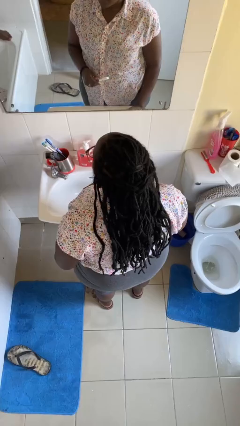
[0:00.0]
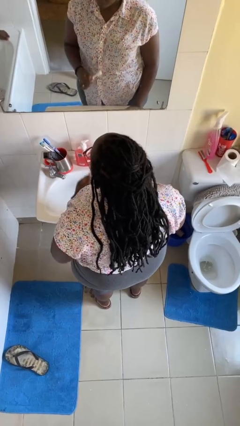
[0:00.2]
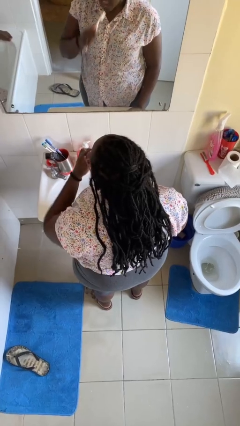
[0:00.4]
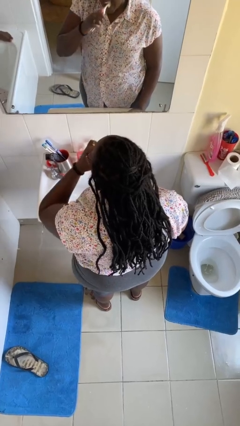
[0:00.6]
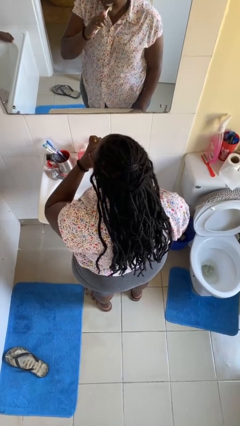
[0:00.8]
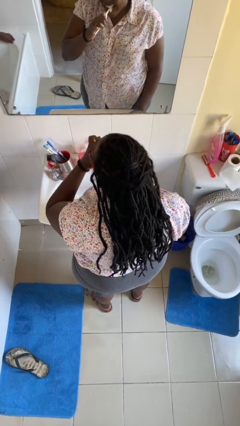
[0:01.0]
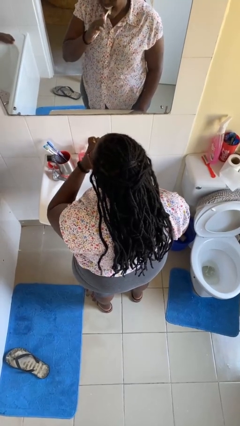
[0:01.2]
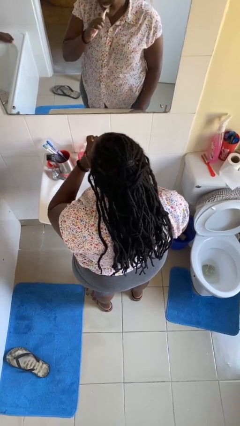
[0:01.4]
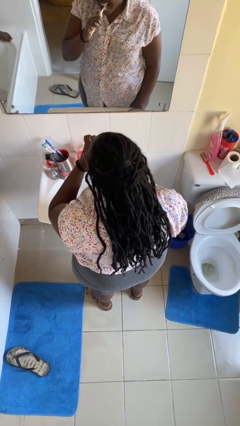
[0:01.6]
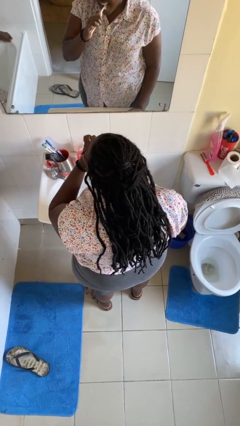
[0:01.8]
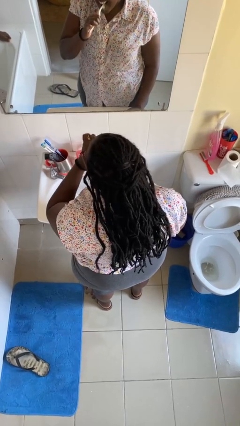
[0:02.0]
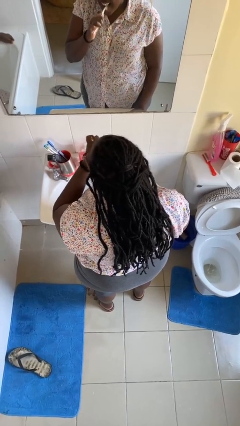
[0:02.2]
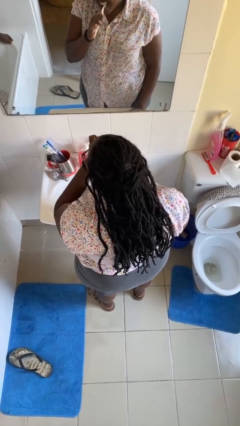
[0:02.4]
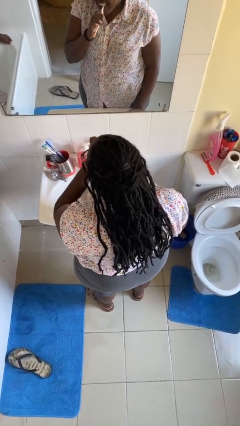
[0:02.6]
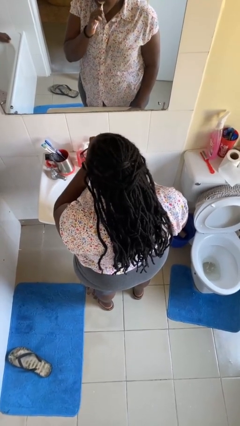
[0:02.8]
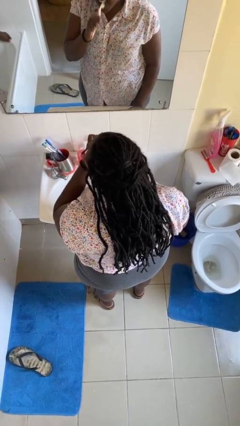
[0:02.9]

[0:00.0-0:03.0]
person brushes teeth

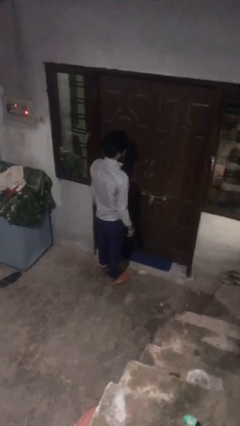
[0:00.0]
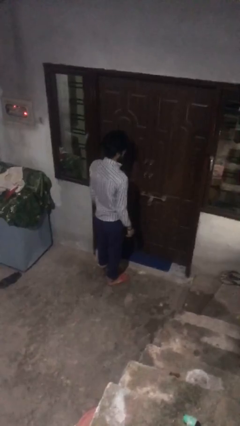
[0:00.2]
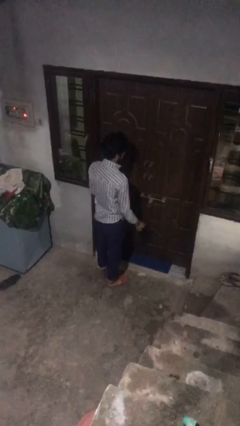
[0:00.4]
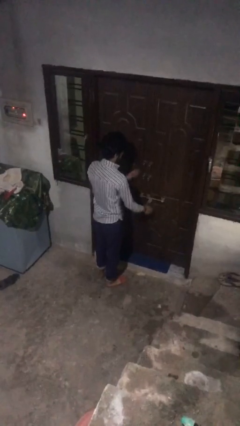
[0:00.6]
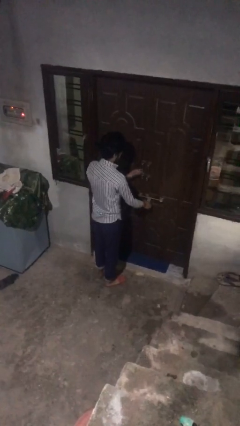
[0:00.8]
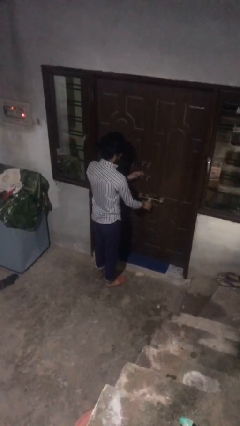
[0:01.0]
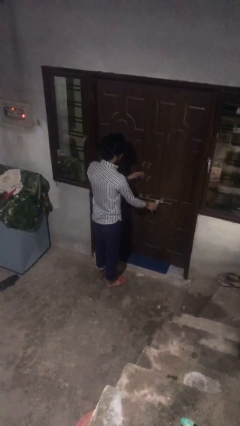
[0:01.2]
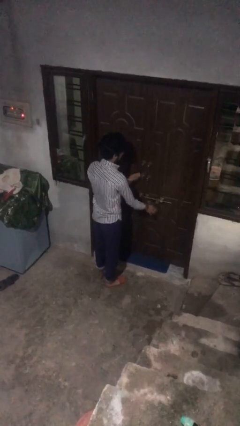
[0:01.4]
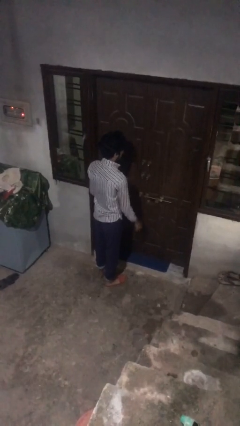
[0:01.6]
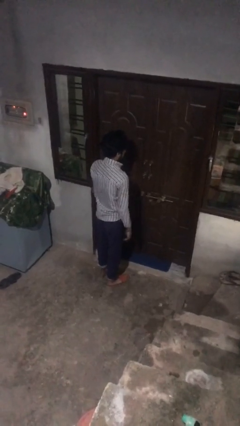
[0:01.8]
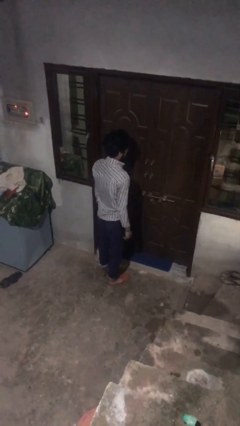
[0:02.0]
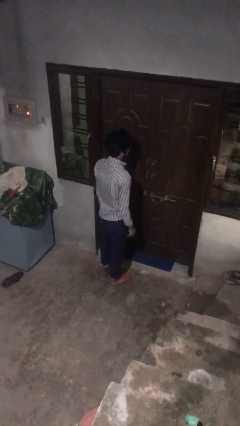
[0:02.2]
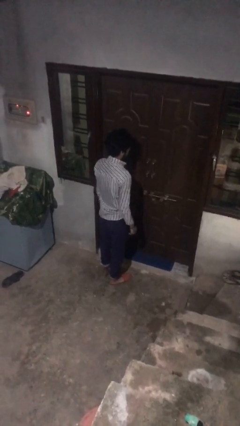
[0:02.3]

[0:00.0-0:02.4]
person unlocks door with keys

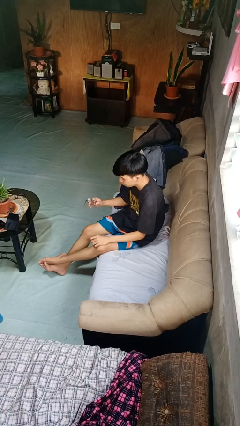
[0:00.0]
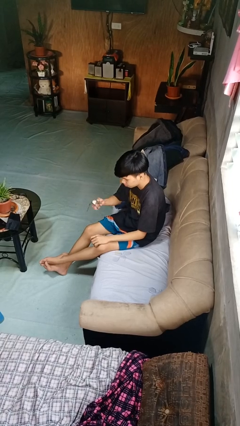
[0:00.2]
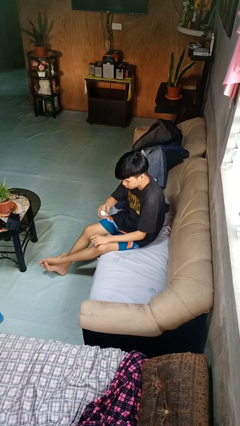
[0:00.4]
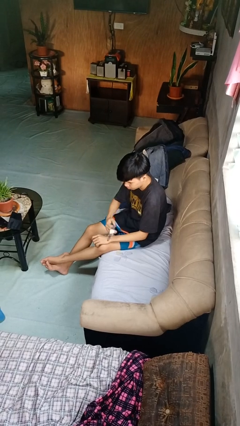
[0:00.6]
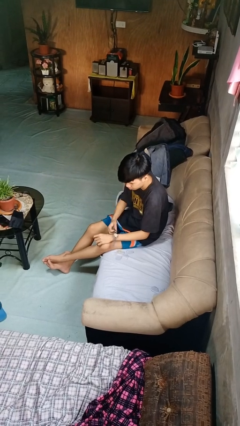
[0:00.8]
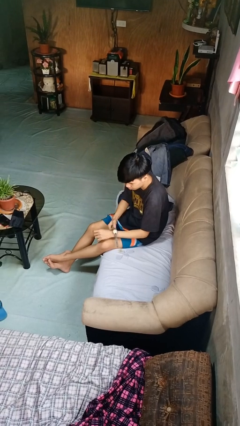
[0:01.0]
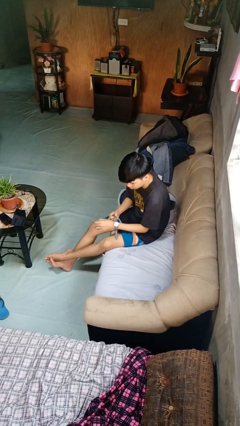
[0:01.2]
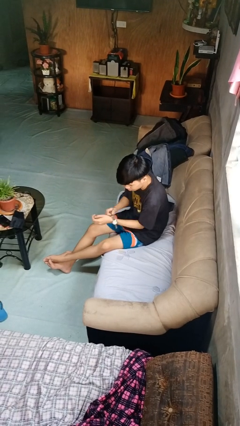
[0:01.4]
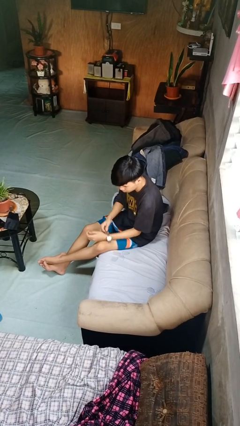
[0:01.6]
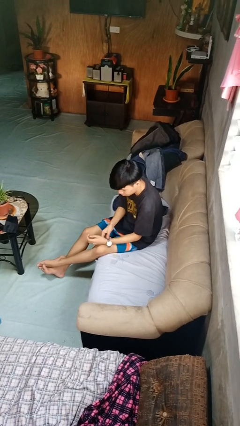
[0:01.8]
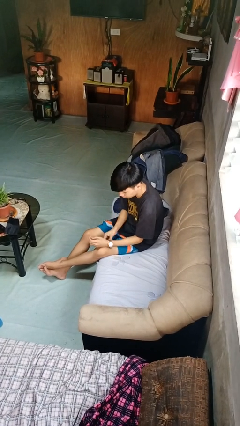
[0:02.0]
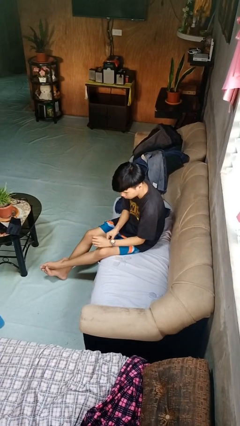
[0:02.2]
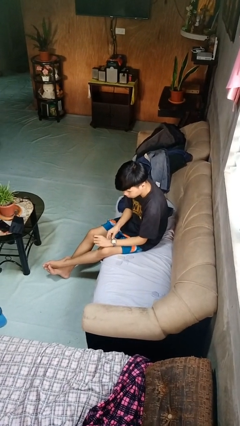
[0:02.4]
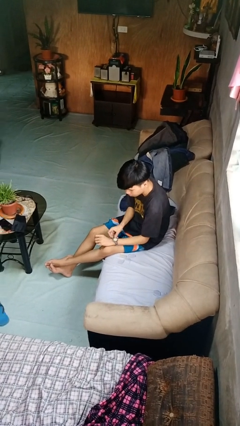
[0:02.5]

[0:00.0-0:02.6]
person puts on wristwatch

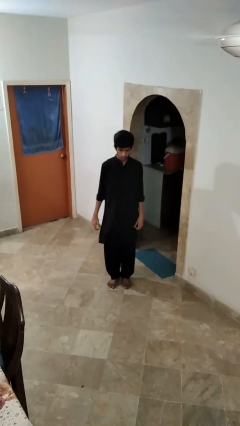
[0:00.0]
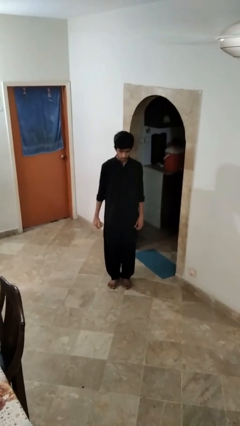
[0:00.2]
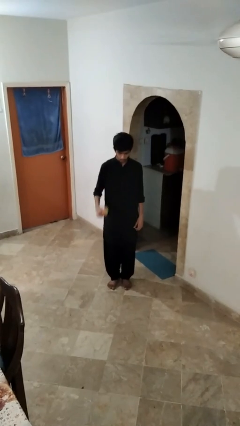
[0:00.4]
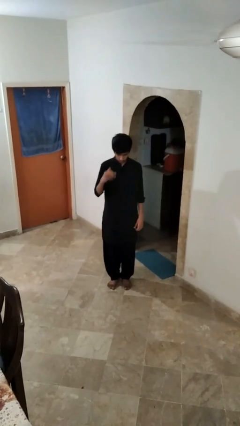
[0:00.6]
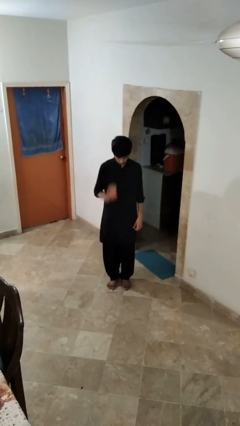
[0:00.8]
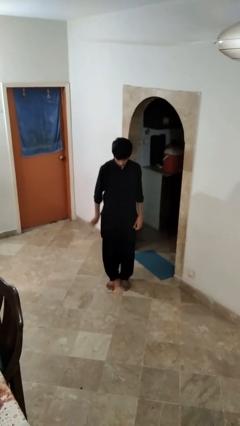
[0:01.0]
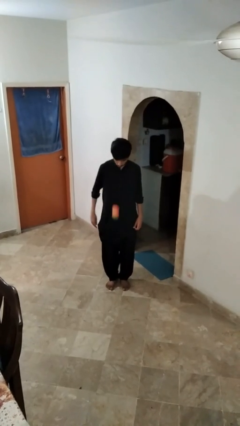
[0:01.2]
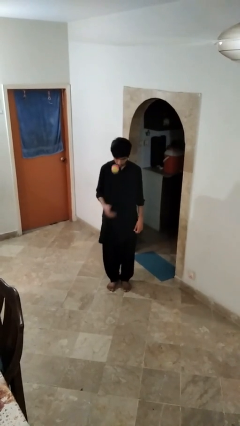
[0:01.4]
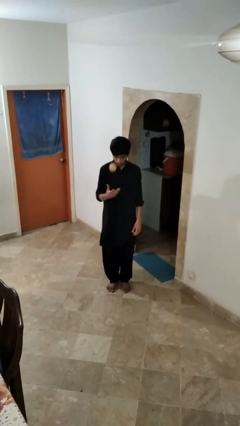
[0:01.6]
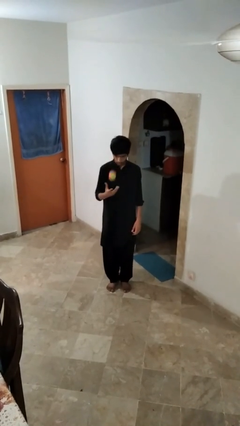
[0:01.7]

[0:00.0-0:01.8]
person bounces ball on floor

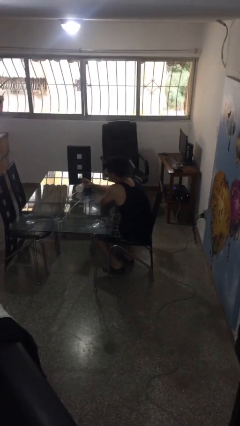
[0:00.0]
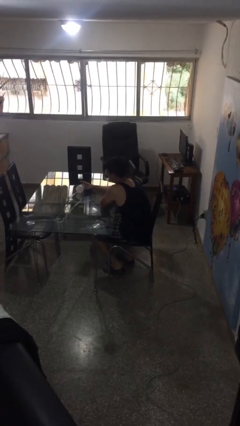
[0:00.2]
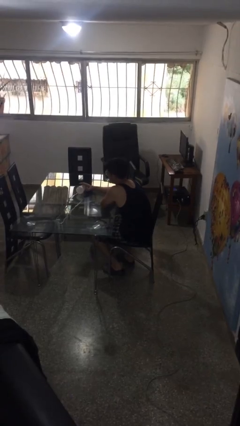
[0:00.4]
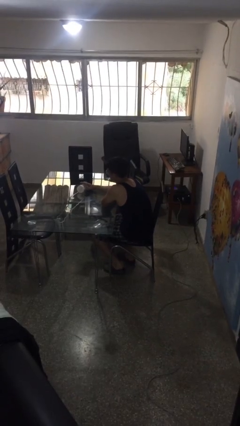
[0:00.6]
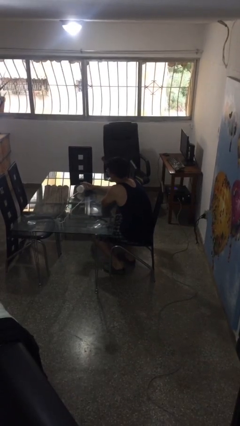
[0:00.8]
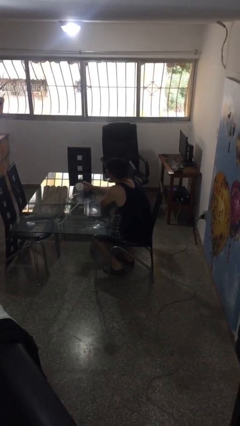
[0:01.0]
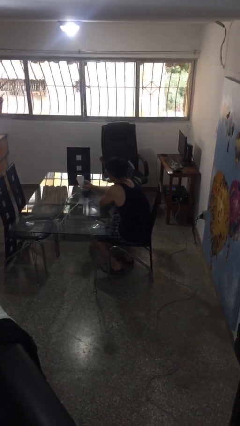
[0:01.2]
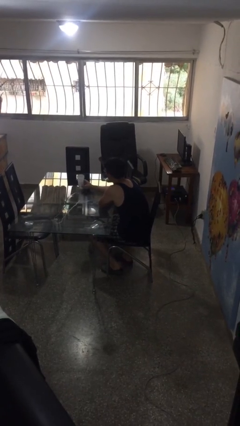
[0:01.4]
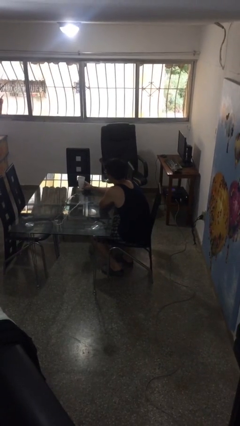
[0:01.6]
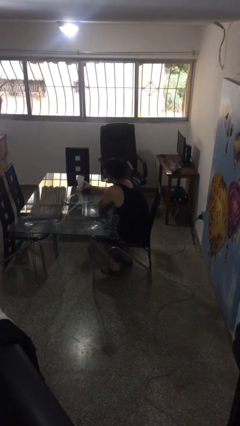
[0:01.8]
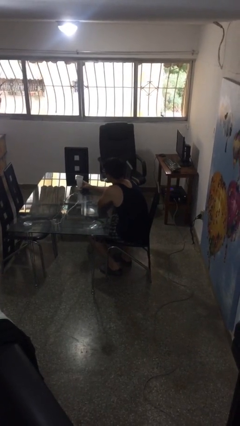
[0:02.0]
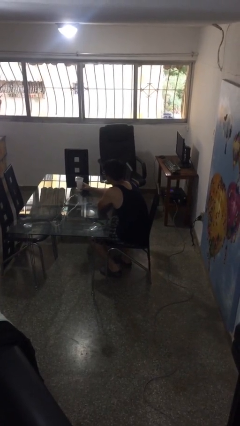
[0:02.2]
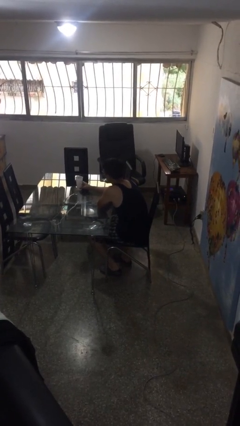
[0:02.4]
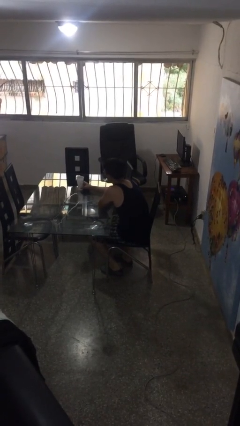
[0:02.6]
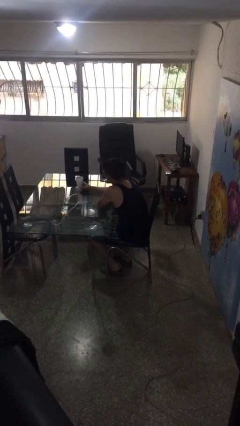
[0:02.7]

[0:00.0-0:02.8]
person sets upright glass

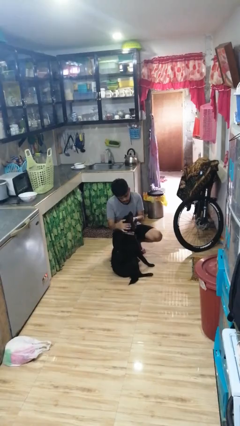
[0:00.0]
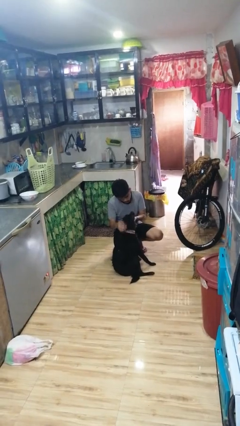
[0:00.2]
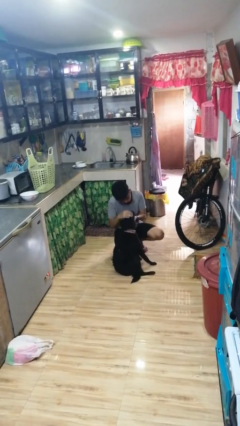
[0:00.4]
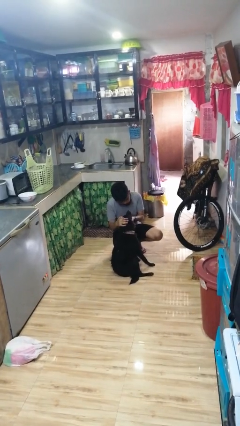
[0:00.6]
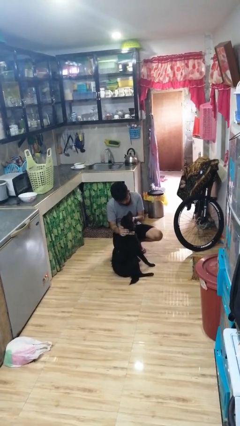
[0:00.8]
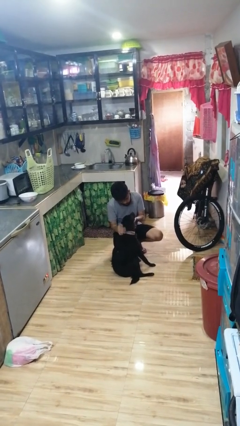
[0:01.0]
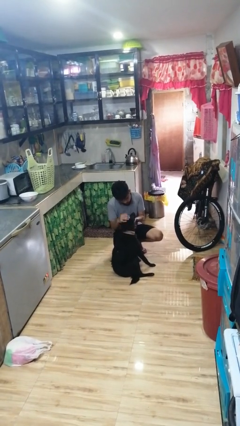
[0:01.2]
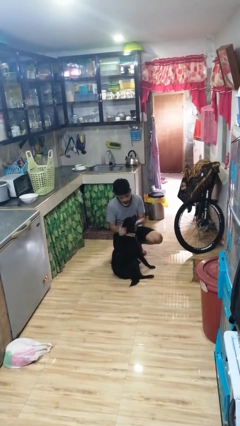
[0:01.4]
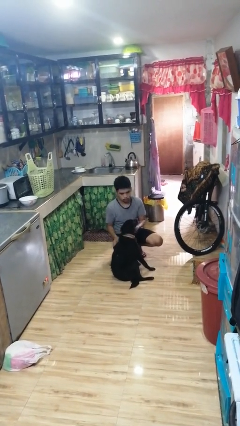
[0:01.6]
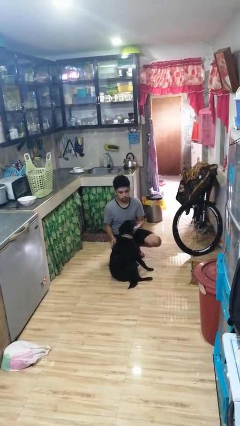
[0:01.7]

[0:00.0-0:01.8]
person pets dog

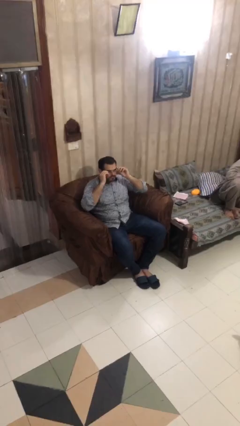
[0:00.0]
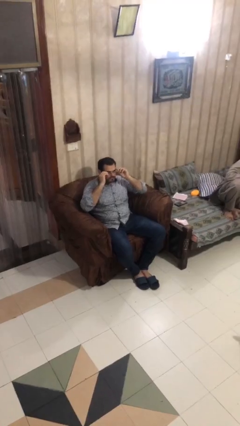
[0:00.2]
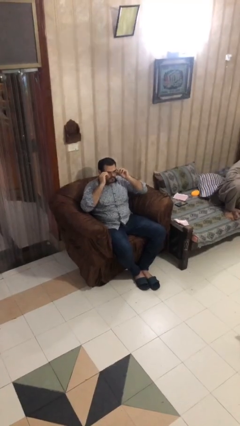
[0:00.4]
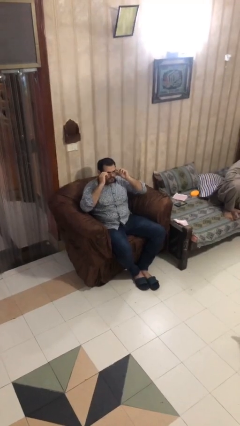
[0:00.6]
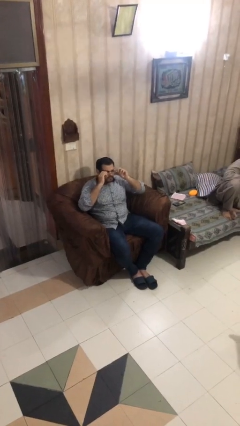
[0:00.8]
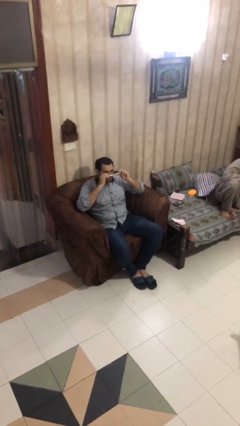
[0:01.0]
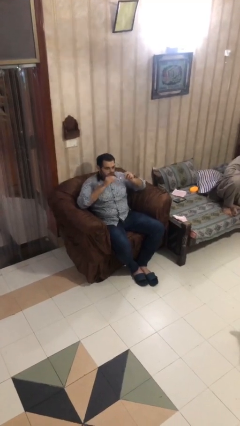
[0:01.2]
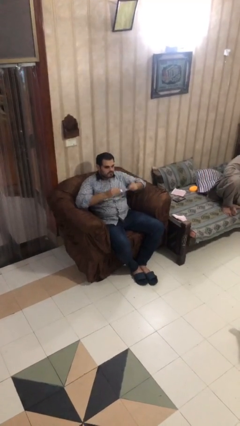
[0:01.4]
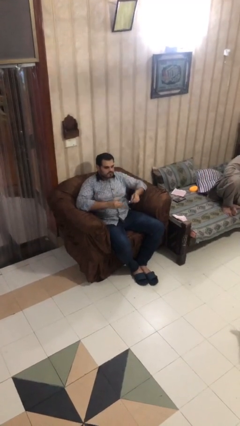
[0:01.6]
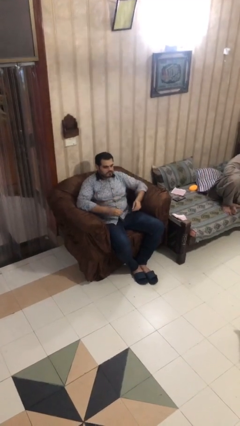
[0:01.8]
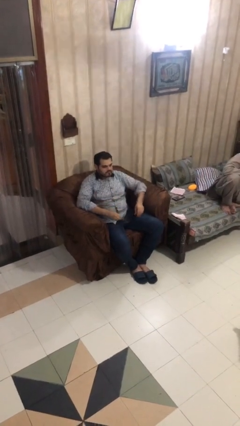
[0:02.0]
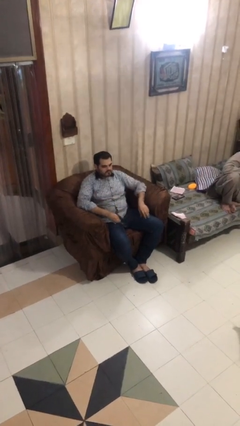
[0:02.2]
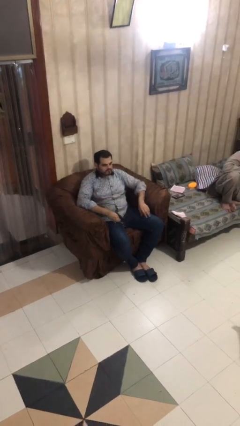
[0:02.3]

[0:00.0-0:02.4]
person takes off glasses

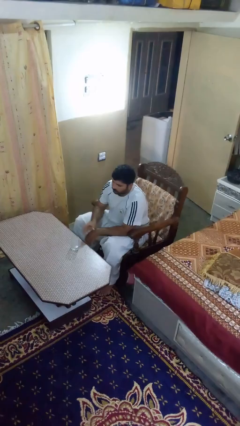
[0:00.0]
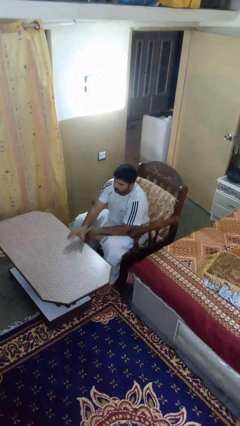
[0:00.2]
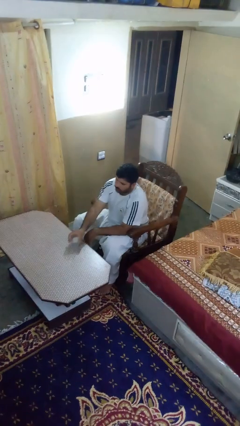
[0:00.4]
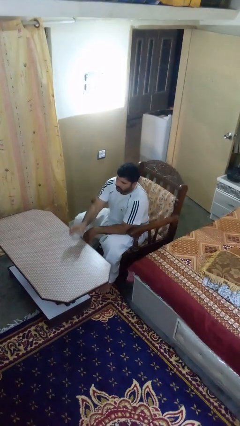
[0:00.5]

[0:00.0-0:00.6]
person picks up object from table
